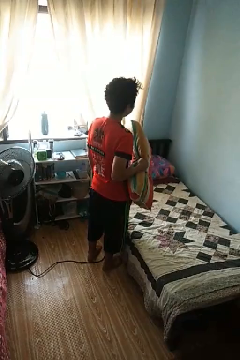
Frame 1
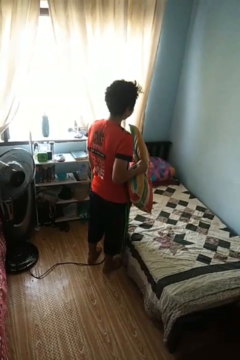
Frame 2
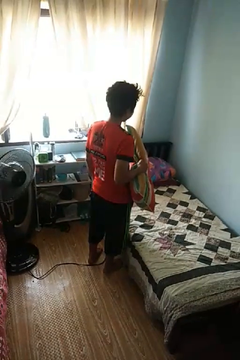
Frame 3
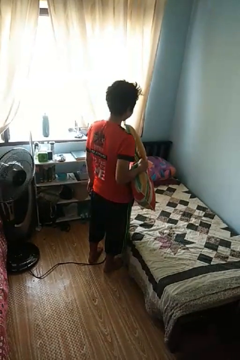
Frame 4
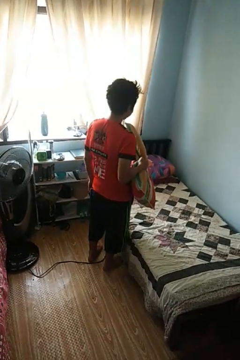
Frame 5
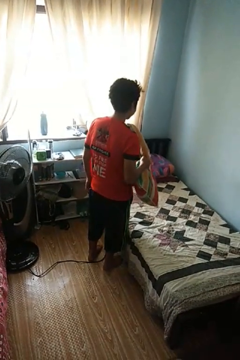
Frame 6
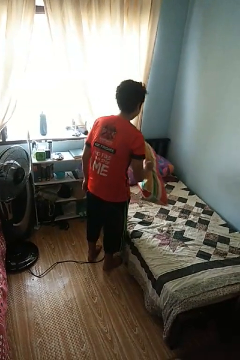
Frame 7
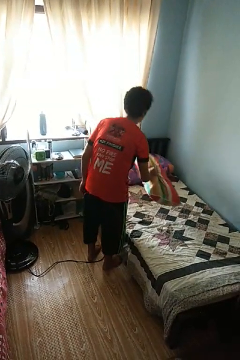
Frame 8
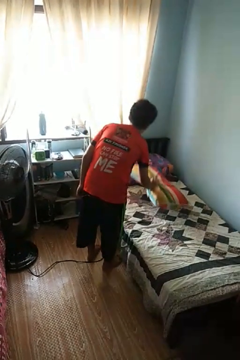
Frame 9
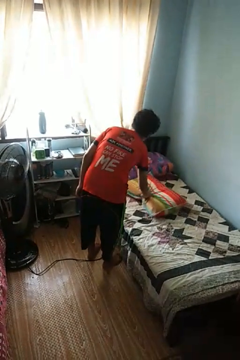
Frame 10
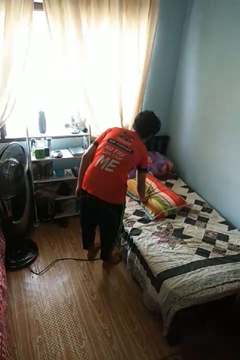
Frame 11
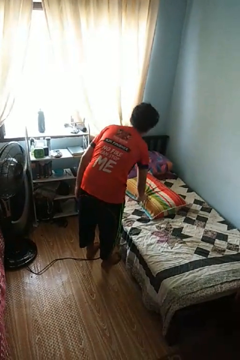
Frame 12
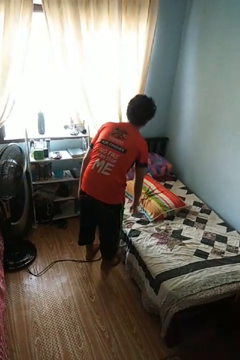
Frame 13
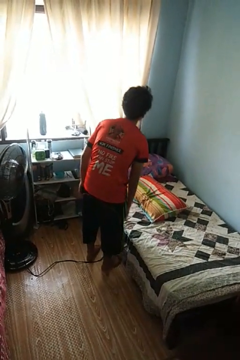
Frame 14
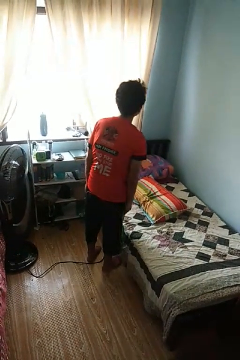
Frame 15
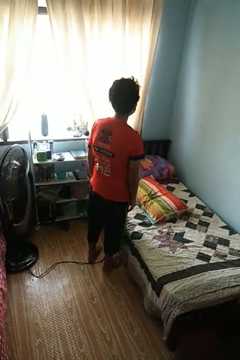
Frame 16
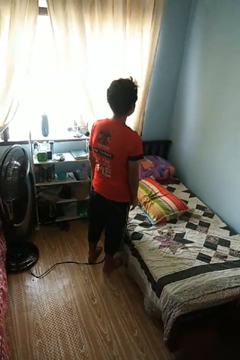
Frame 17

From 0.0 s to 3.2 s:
person puts down object on bed

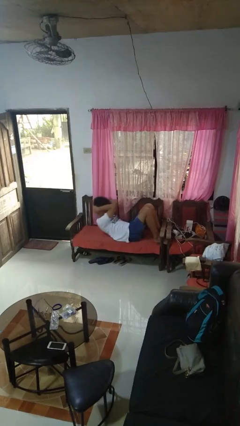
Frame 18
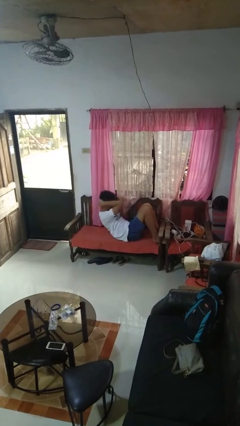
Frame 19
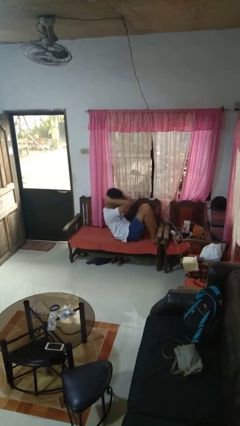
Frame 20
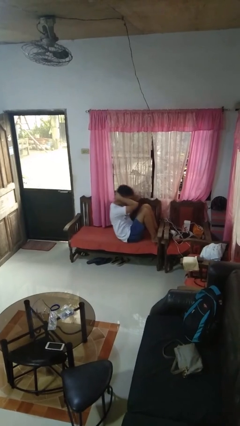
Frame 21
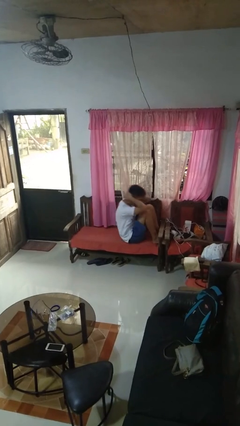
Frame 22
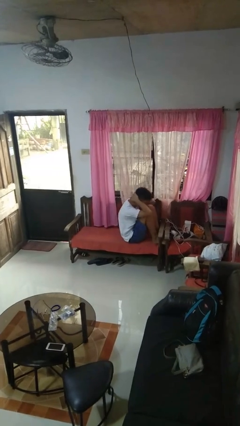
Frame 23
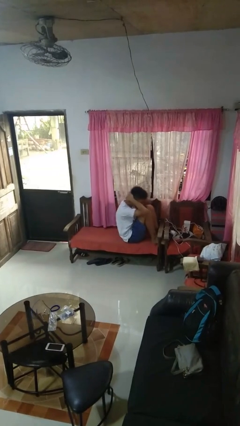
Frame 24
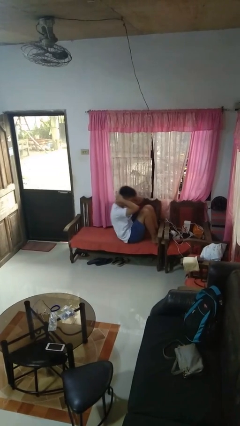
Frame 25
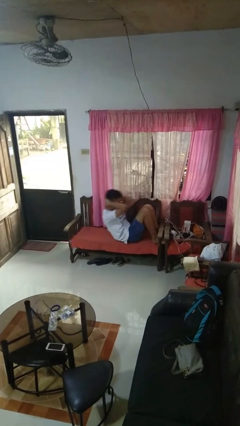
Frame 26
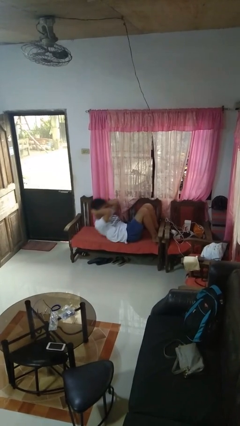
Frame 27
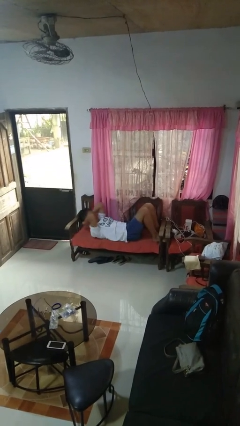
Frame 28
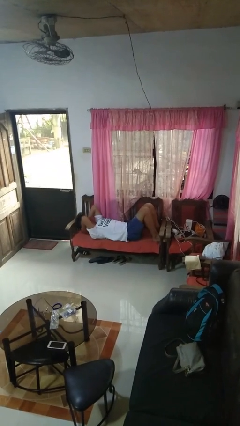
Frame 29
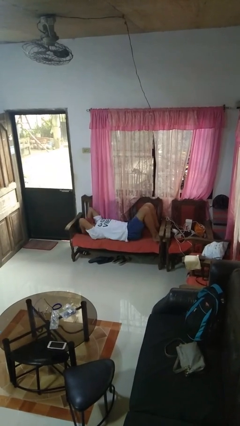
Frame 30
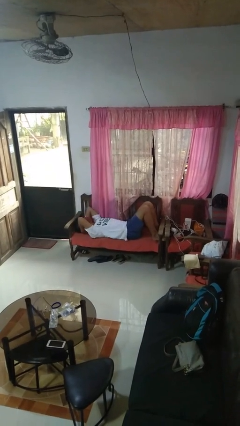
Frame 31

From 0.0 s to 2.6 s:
person exercises with situp

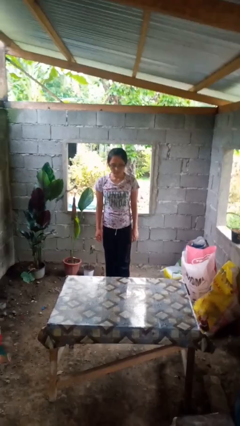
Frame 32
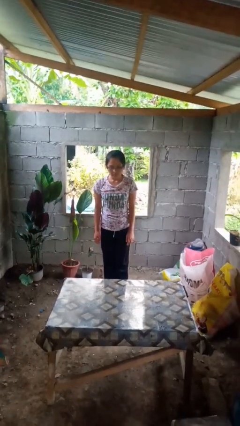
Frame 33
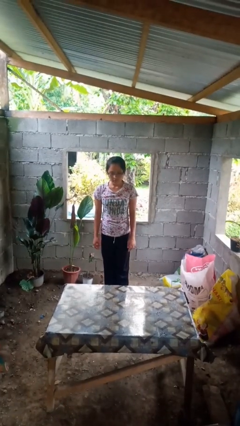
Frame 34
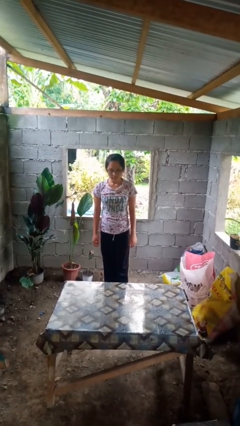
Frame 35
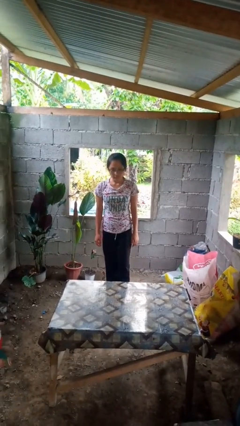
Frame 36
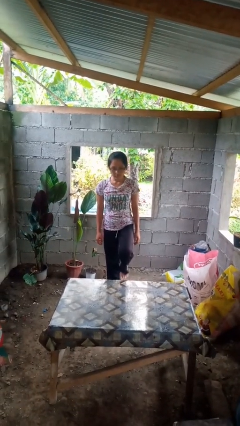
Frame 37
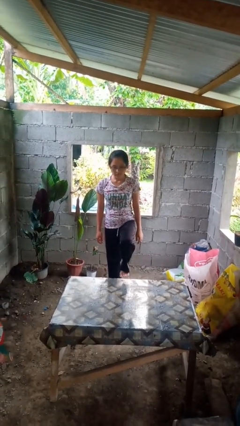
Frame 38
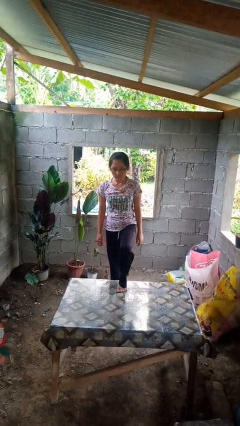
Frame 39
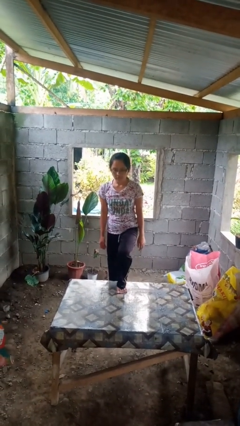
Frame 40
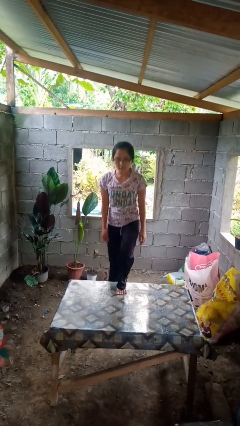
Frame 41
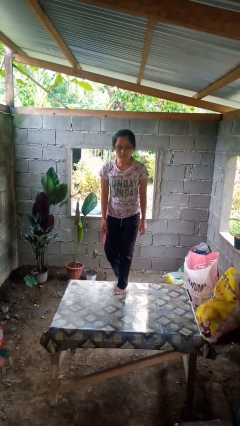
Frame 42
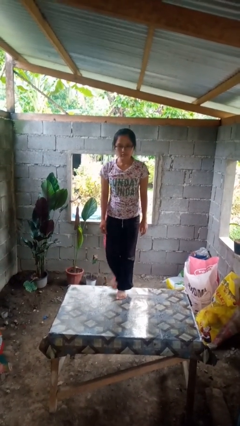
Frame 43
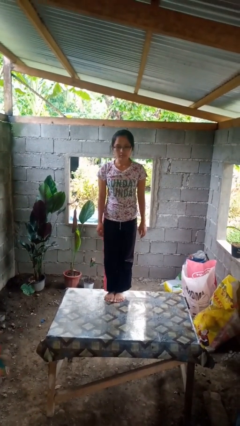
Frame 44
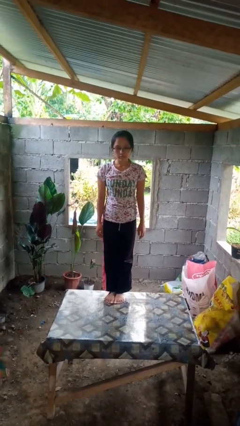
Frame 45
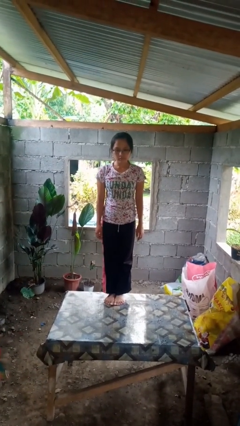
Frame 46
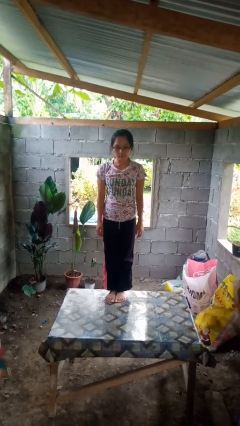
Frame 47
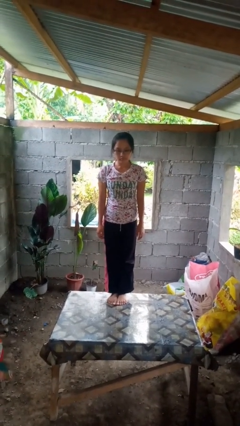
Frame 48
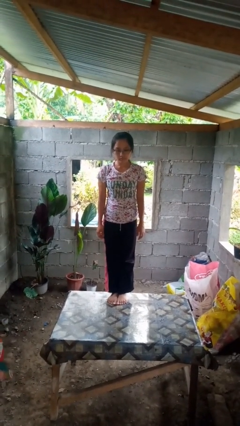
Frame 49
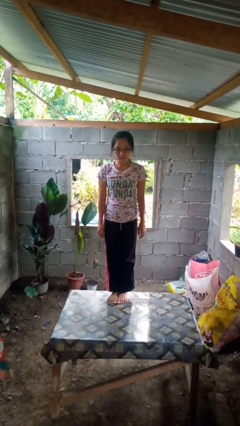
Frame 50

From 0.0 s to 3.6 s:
person climbs on table

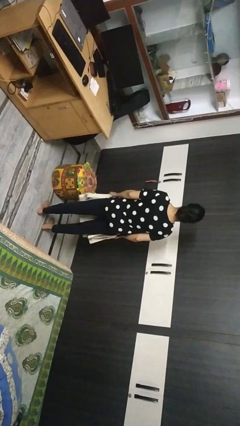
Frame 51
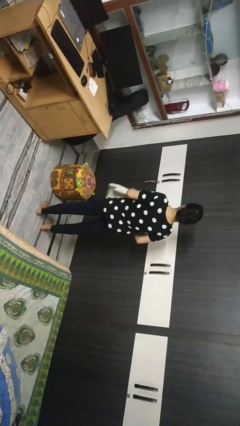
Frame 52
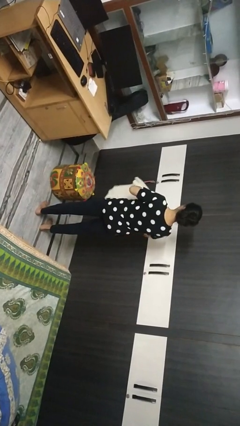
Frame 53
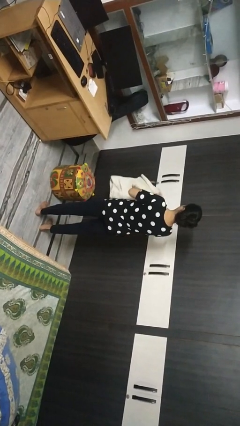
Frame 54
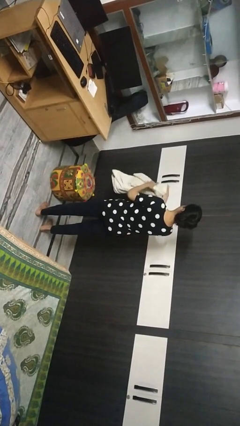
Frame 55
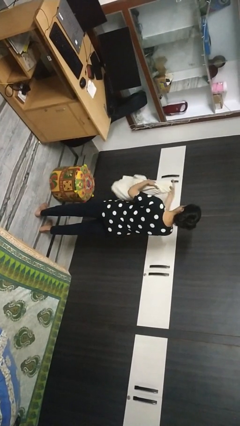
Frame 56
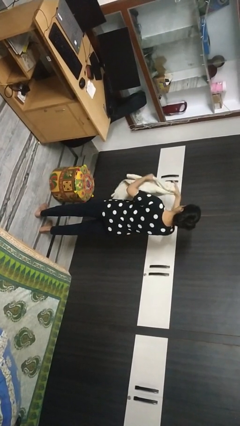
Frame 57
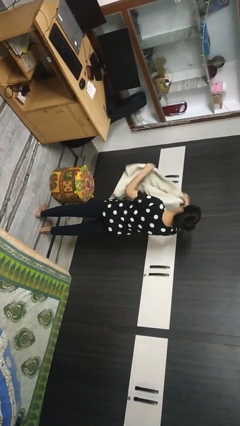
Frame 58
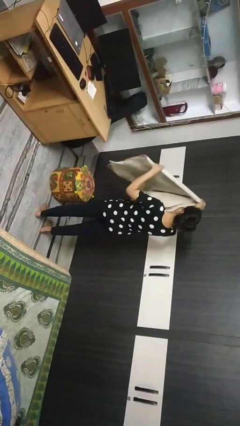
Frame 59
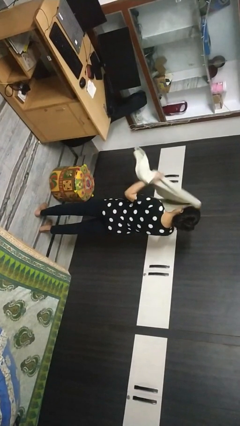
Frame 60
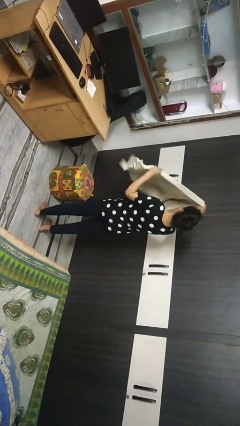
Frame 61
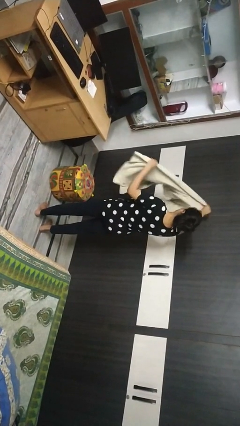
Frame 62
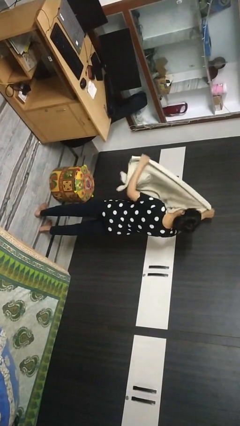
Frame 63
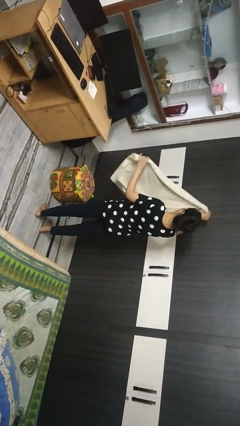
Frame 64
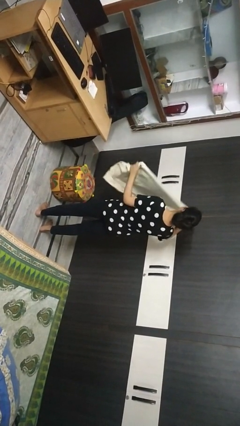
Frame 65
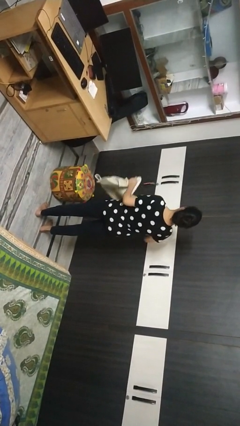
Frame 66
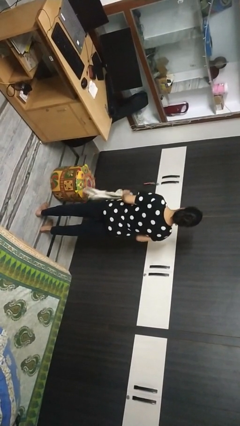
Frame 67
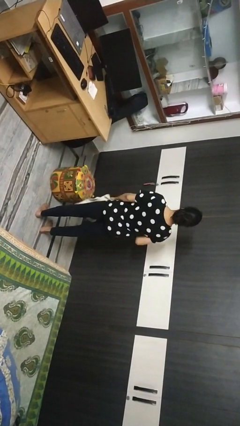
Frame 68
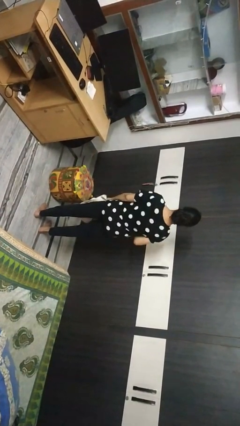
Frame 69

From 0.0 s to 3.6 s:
person unfolds blanket

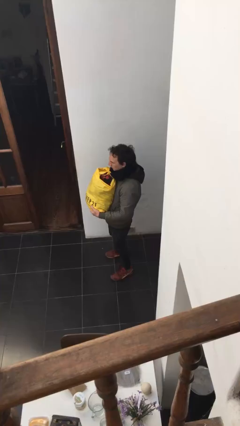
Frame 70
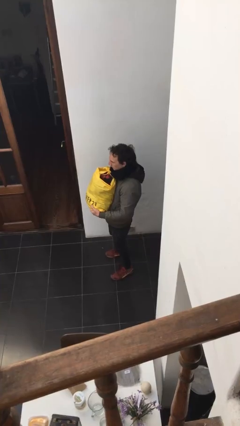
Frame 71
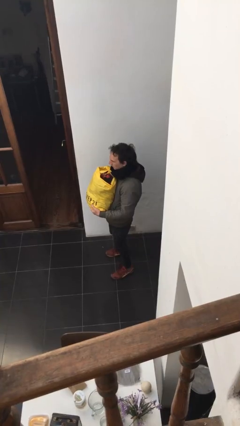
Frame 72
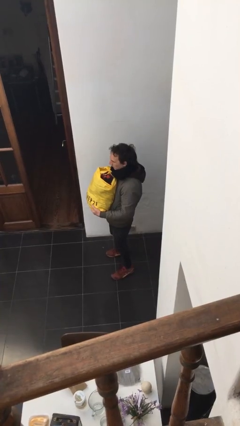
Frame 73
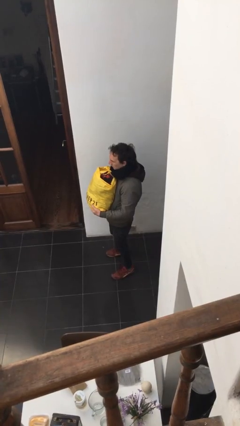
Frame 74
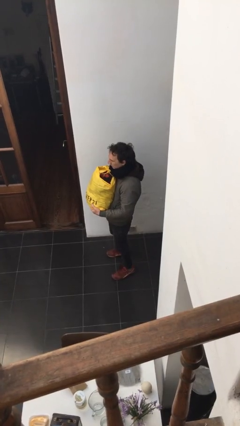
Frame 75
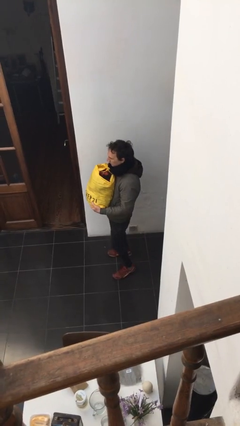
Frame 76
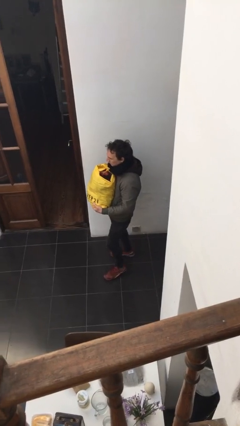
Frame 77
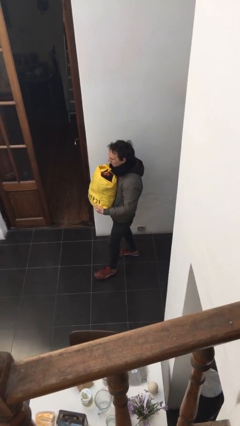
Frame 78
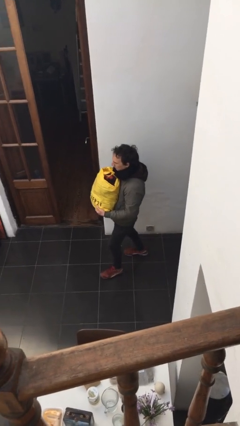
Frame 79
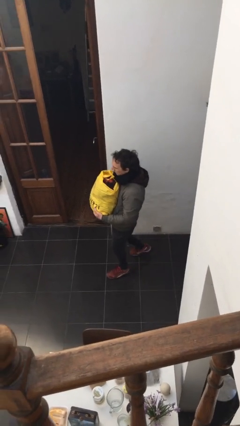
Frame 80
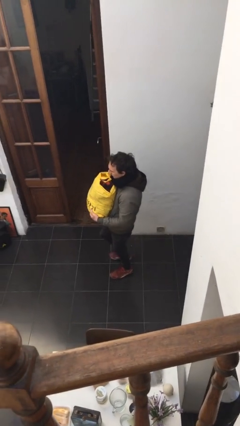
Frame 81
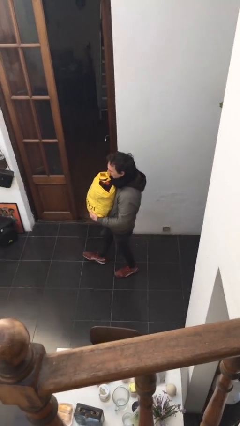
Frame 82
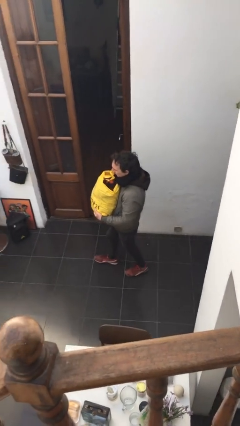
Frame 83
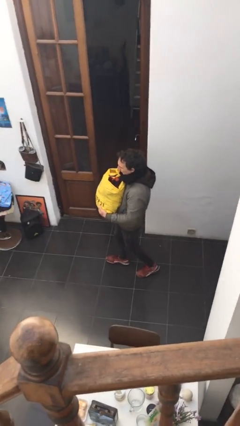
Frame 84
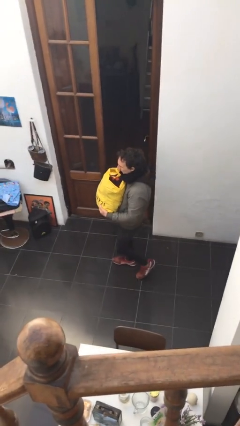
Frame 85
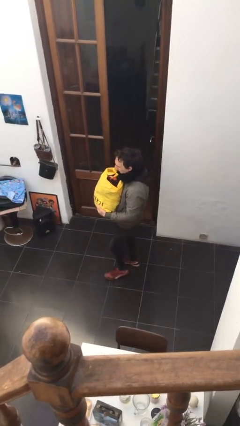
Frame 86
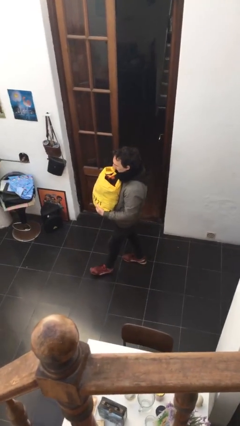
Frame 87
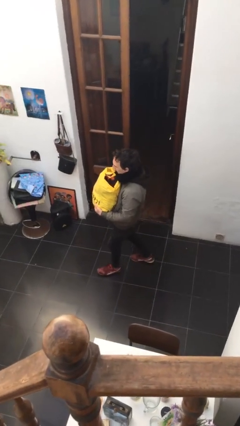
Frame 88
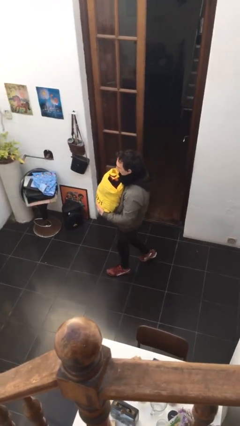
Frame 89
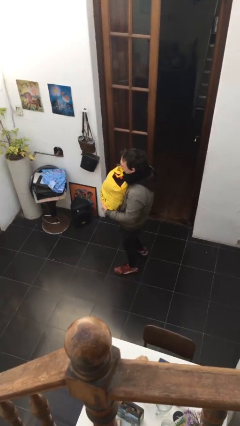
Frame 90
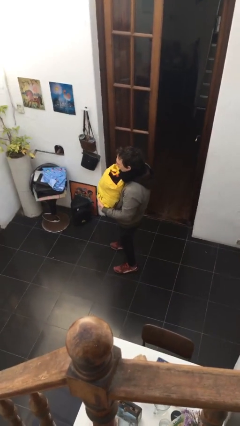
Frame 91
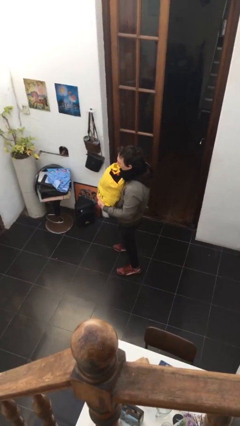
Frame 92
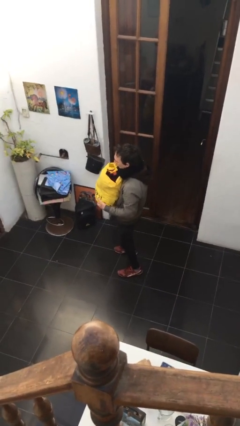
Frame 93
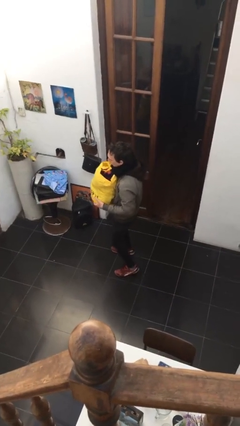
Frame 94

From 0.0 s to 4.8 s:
person carries heavy object

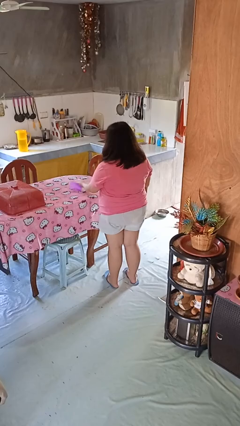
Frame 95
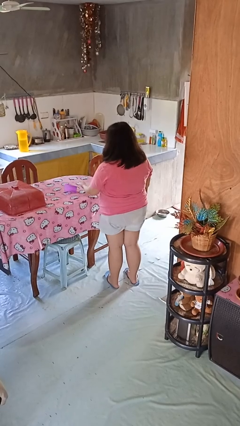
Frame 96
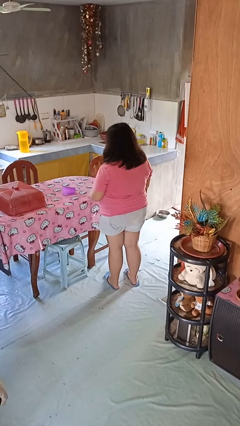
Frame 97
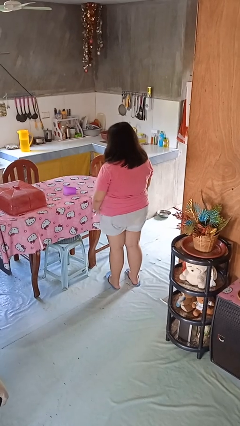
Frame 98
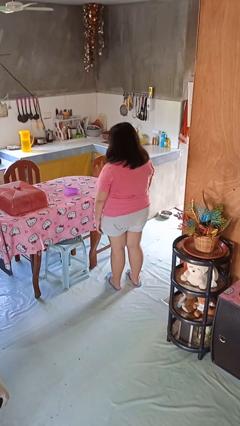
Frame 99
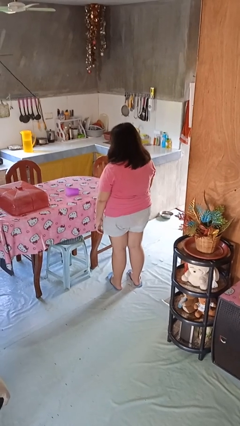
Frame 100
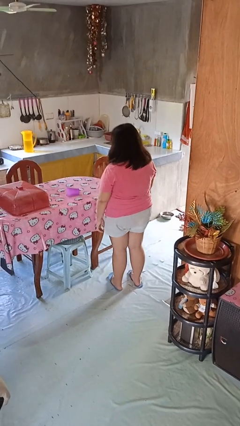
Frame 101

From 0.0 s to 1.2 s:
person spills on table
